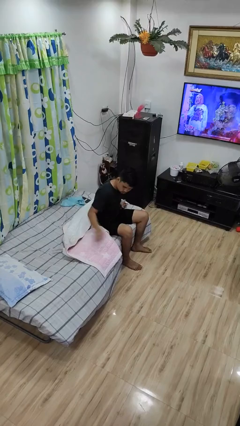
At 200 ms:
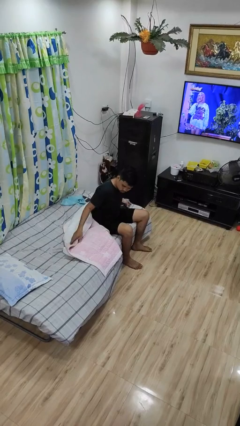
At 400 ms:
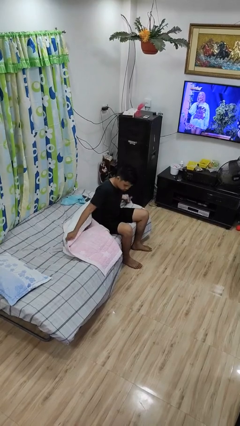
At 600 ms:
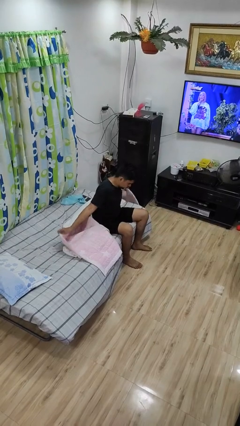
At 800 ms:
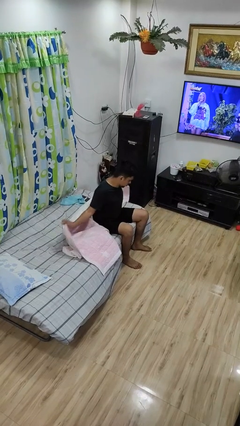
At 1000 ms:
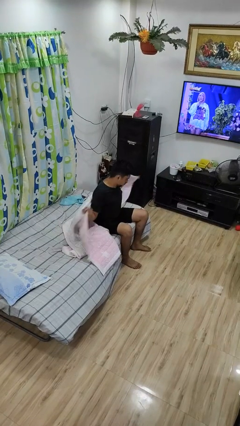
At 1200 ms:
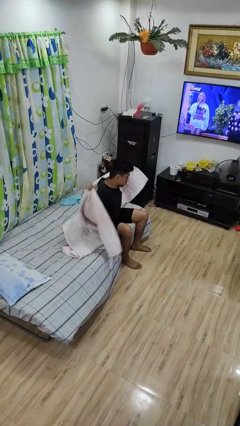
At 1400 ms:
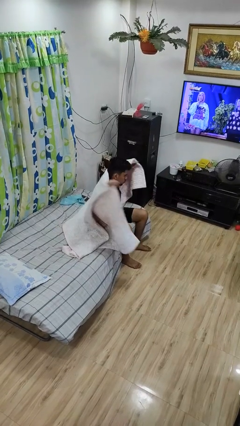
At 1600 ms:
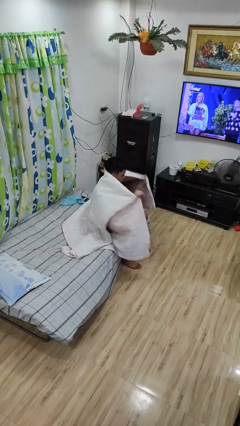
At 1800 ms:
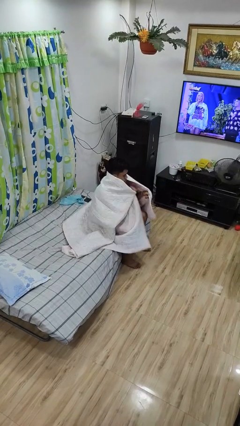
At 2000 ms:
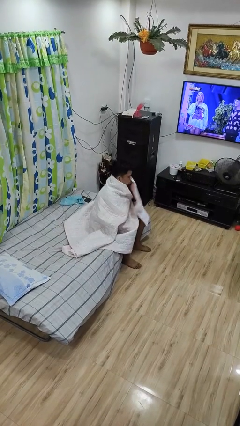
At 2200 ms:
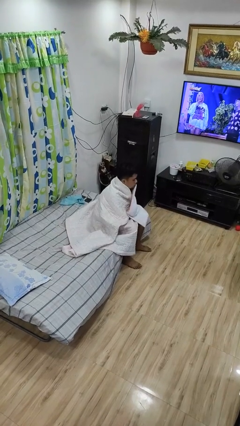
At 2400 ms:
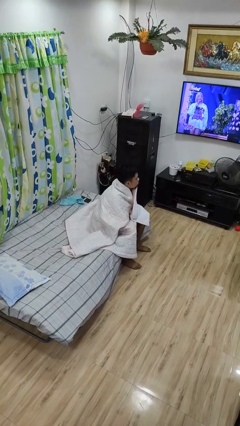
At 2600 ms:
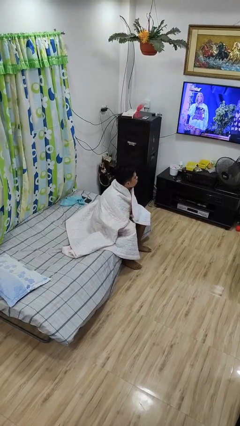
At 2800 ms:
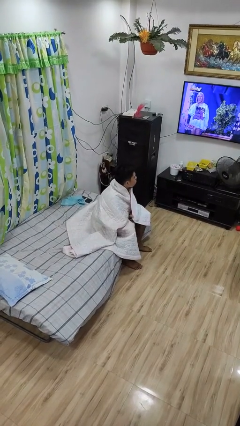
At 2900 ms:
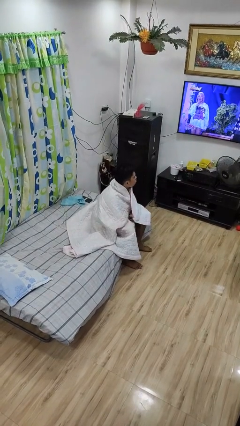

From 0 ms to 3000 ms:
person covers with bedsheets

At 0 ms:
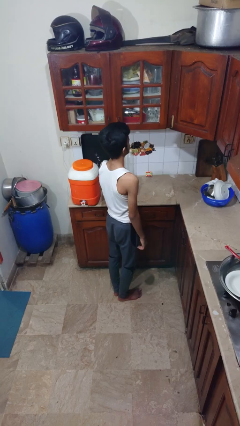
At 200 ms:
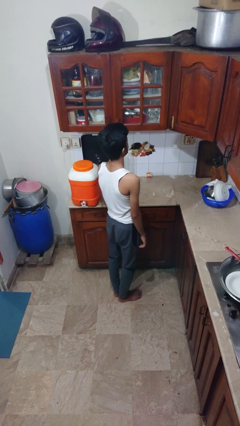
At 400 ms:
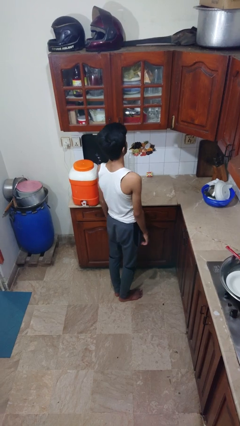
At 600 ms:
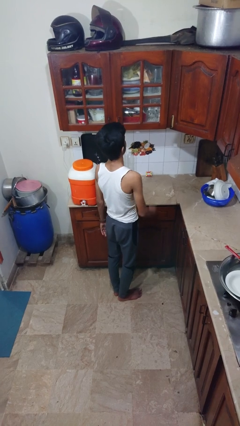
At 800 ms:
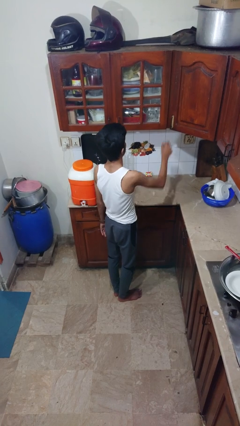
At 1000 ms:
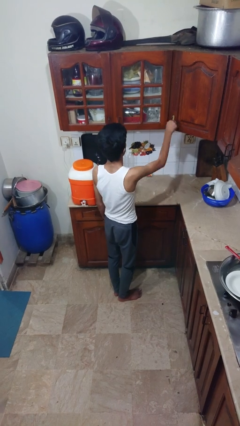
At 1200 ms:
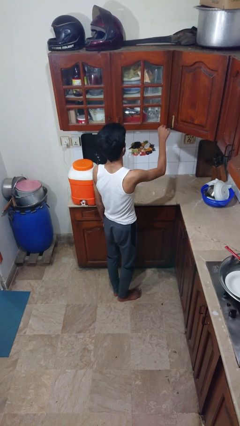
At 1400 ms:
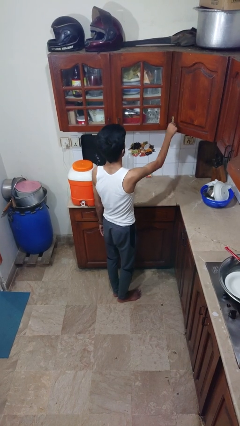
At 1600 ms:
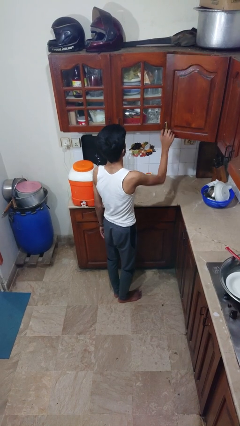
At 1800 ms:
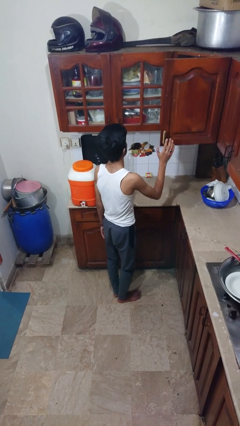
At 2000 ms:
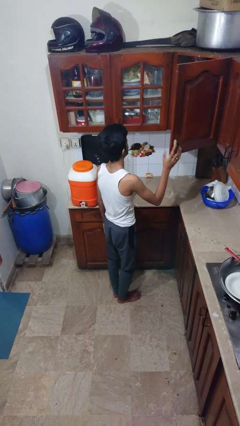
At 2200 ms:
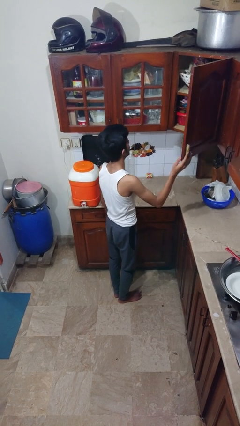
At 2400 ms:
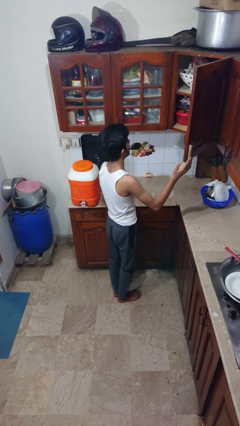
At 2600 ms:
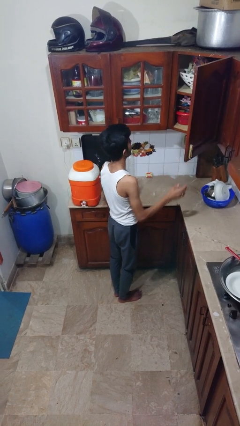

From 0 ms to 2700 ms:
person closes cabinet

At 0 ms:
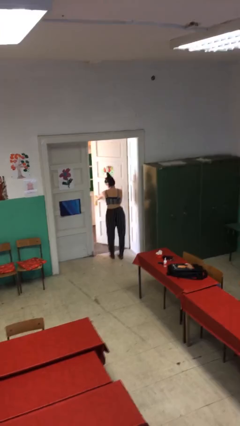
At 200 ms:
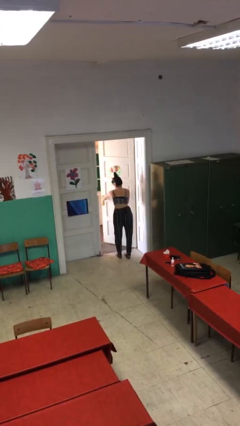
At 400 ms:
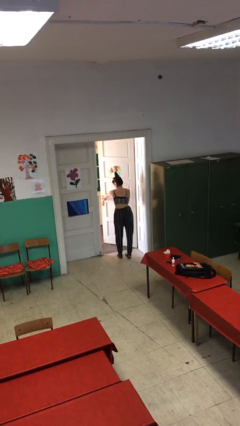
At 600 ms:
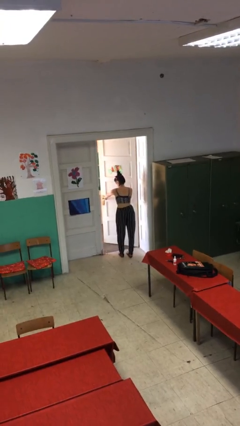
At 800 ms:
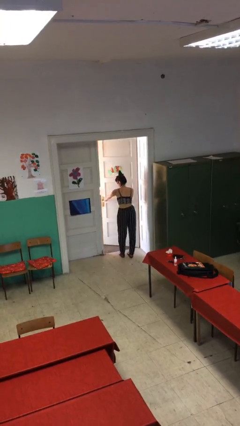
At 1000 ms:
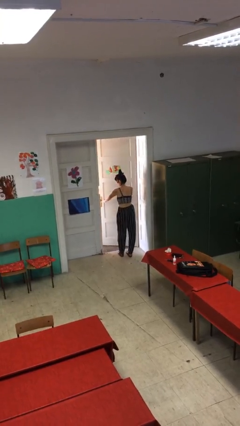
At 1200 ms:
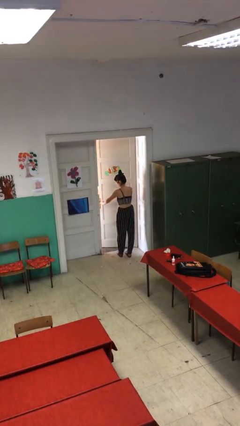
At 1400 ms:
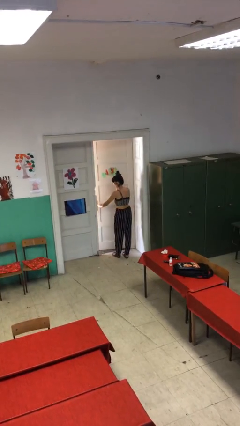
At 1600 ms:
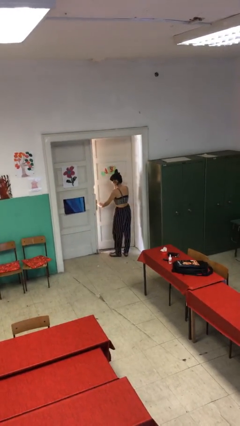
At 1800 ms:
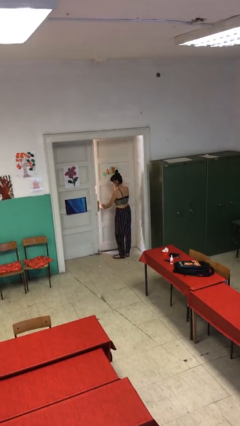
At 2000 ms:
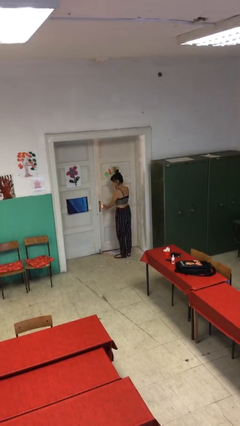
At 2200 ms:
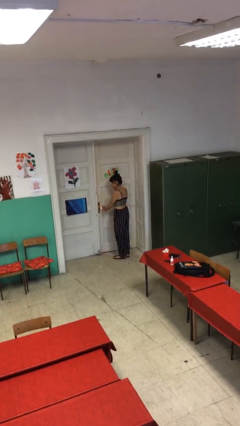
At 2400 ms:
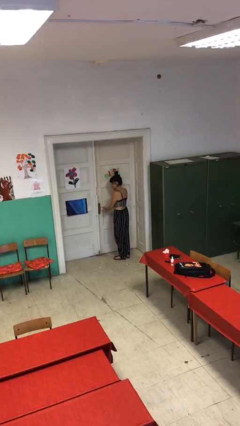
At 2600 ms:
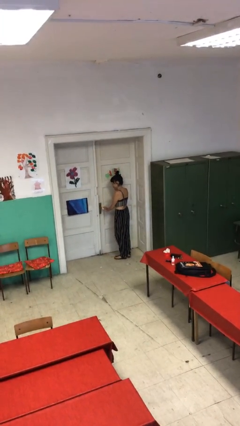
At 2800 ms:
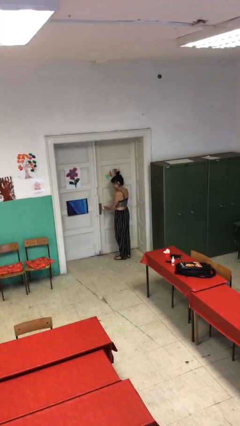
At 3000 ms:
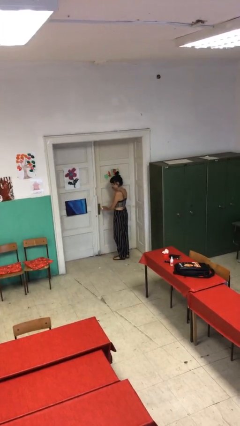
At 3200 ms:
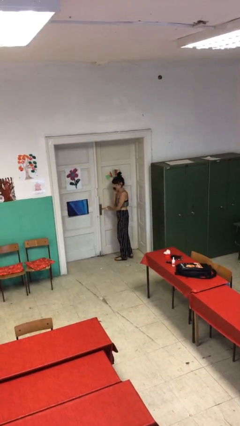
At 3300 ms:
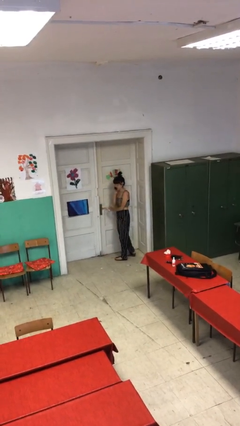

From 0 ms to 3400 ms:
person closes facility door

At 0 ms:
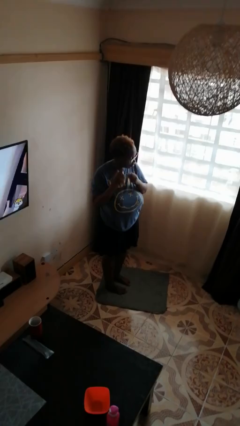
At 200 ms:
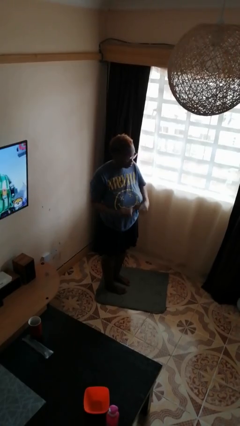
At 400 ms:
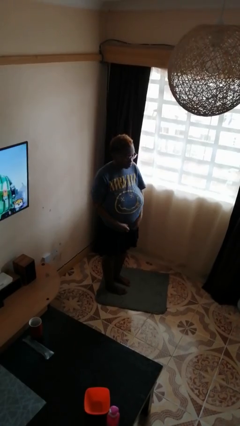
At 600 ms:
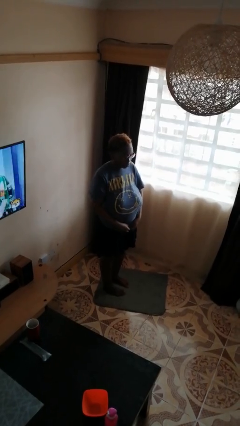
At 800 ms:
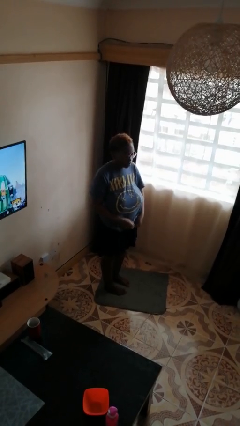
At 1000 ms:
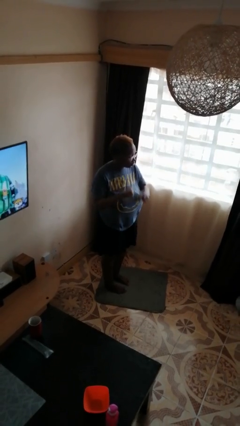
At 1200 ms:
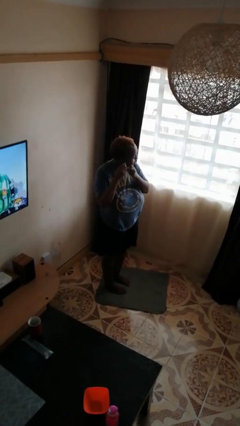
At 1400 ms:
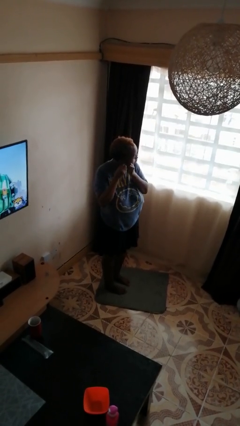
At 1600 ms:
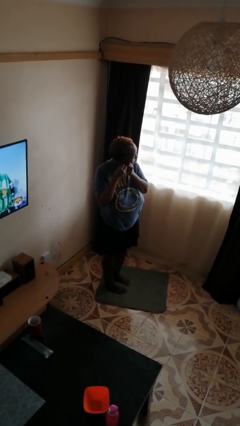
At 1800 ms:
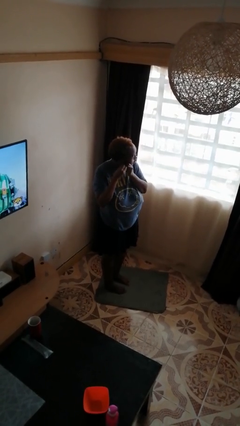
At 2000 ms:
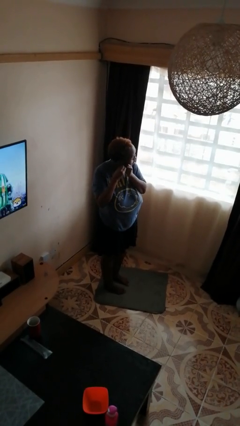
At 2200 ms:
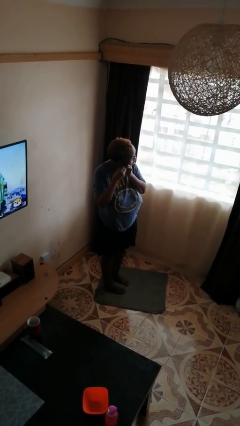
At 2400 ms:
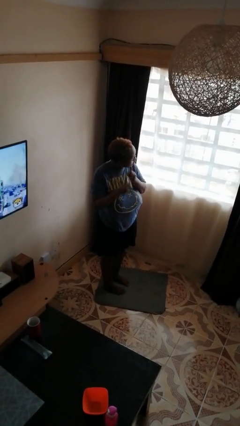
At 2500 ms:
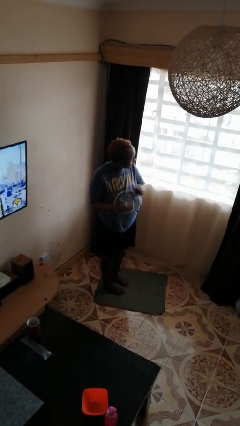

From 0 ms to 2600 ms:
person takes off earrings

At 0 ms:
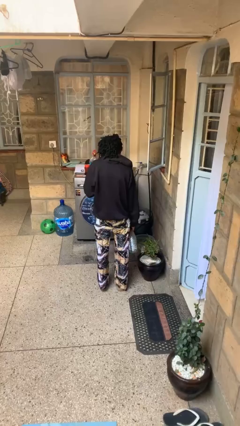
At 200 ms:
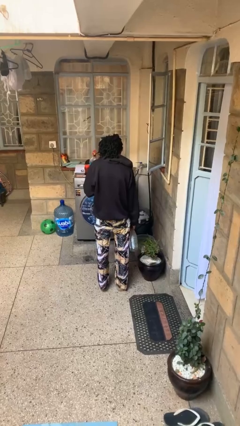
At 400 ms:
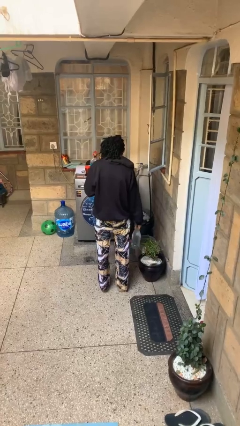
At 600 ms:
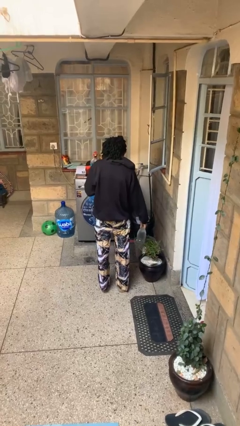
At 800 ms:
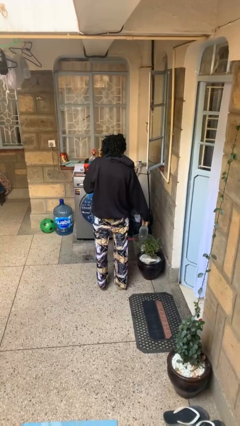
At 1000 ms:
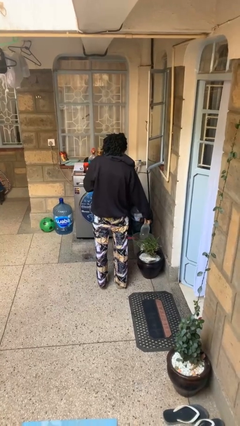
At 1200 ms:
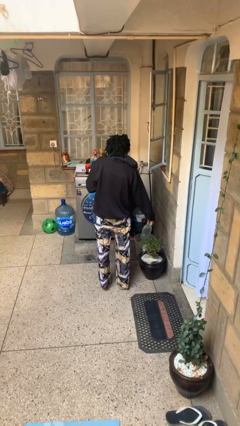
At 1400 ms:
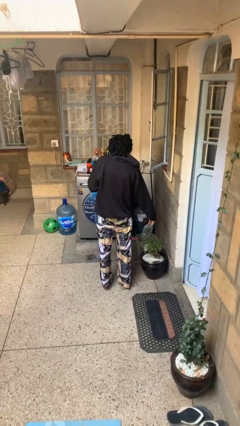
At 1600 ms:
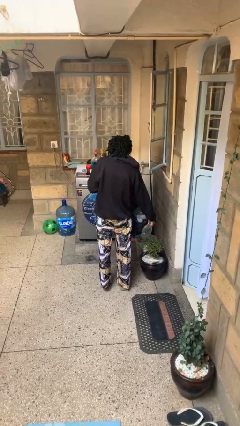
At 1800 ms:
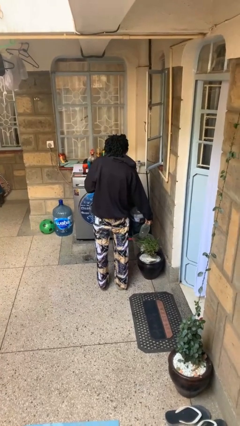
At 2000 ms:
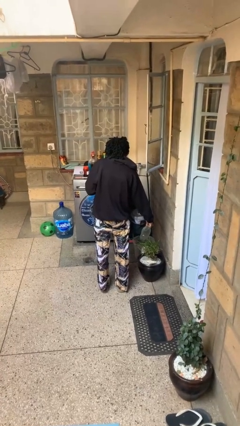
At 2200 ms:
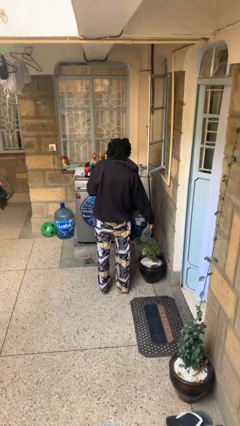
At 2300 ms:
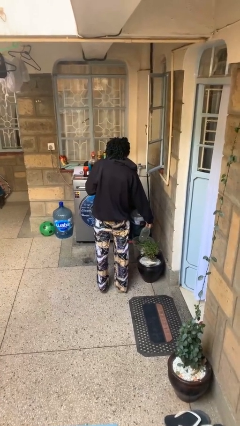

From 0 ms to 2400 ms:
person waters houseplant

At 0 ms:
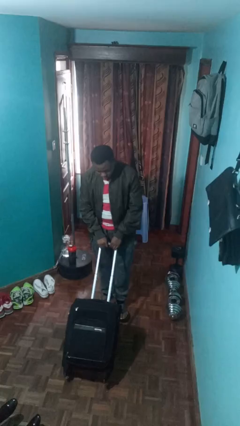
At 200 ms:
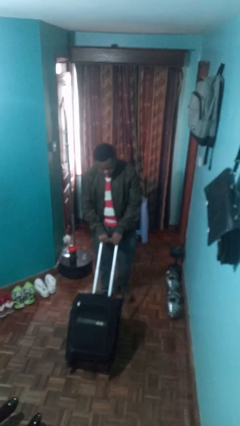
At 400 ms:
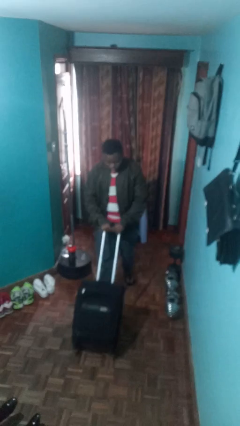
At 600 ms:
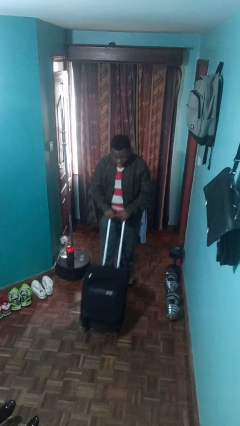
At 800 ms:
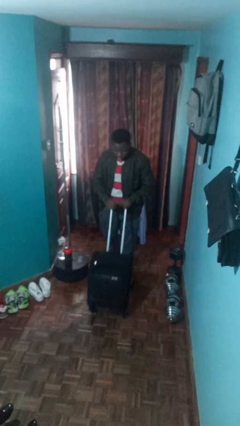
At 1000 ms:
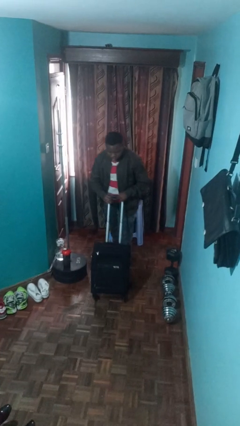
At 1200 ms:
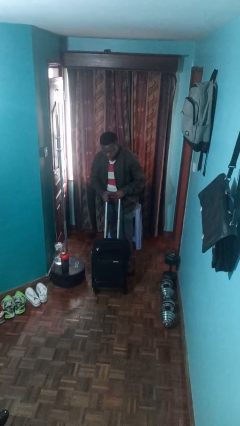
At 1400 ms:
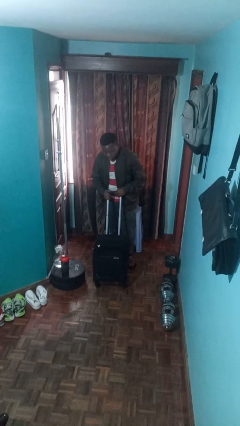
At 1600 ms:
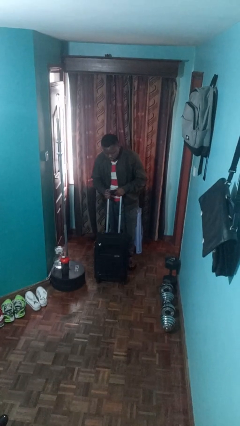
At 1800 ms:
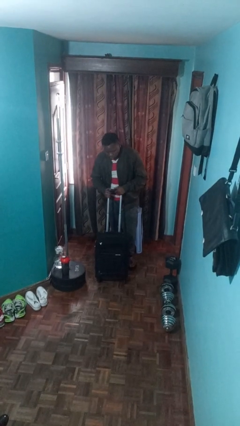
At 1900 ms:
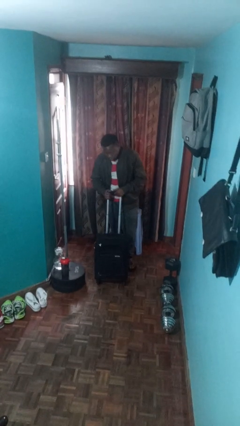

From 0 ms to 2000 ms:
person pulls wheeled cart

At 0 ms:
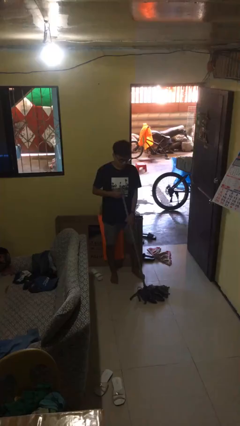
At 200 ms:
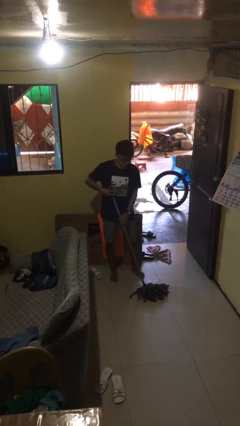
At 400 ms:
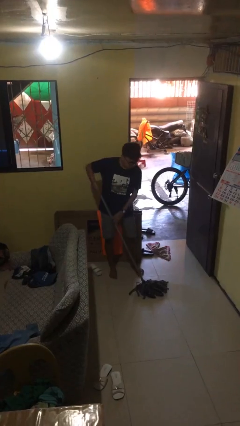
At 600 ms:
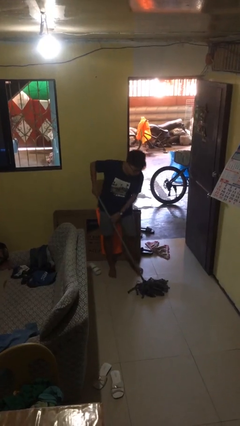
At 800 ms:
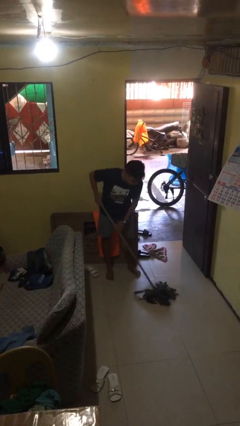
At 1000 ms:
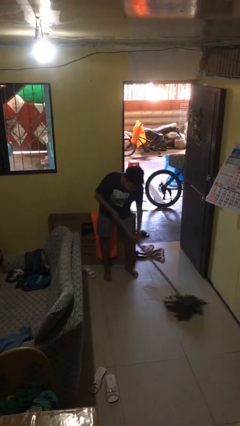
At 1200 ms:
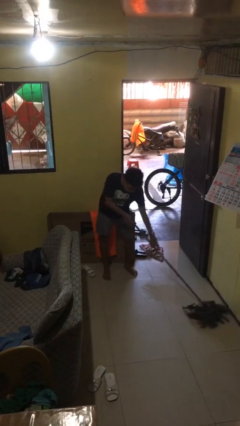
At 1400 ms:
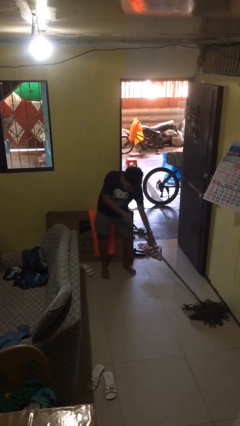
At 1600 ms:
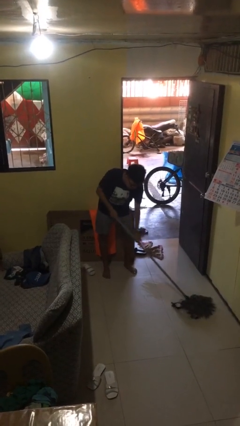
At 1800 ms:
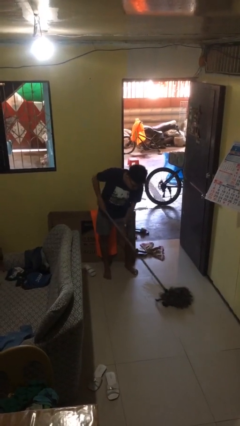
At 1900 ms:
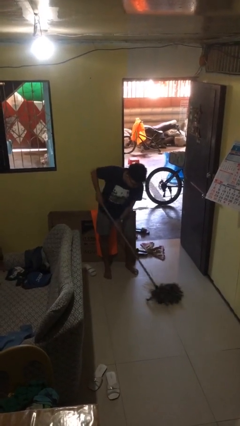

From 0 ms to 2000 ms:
person mops
